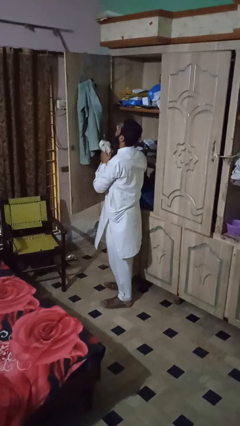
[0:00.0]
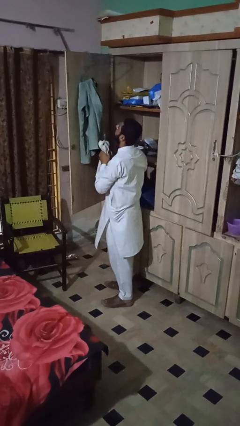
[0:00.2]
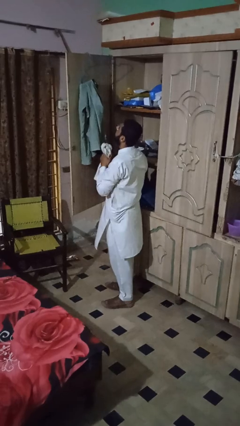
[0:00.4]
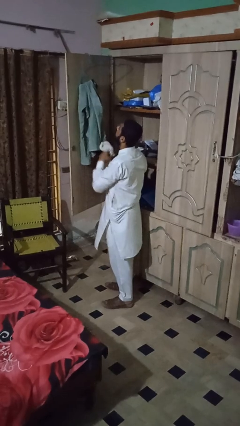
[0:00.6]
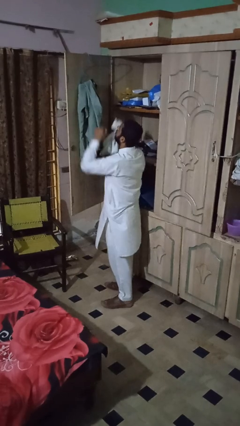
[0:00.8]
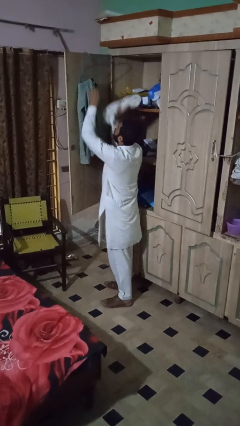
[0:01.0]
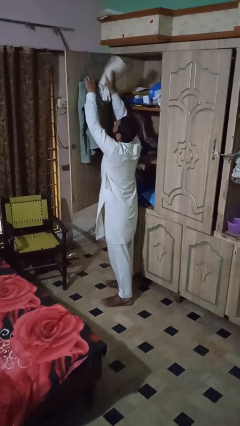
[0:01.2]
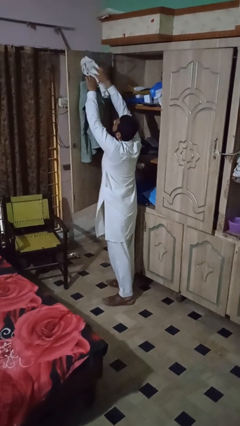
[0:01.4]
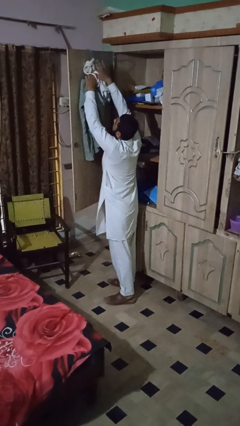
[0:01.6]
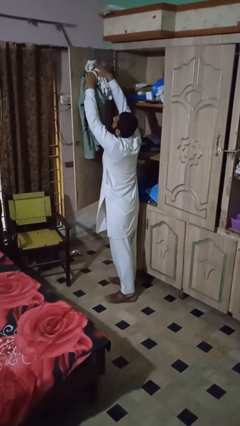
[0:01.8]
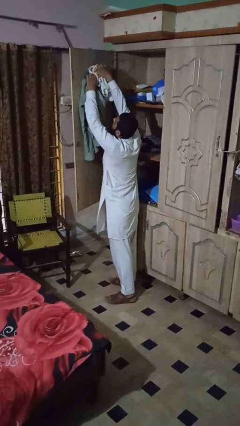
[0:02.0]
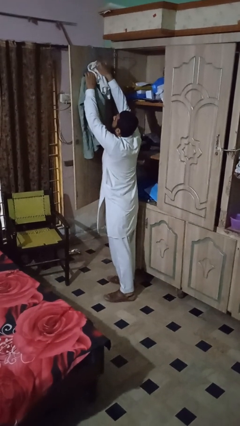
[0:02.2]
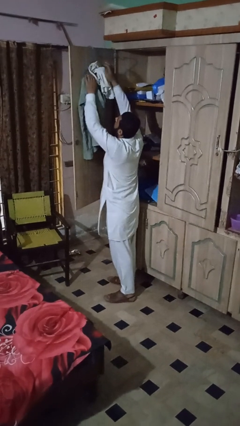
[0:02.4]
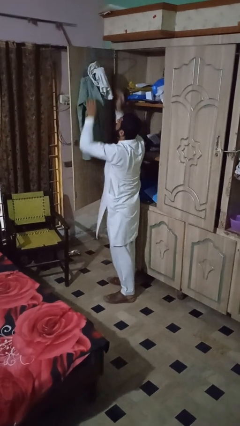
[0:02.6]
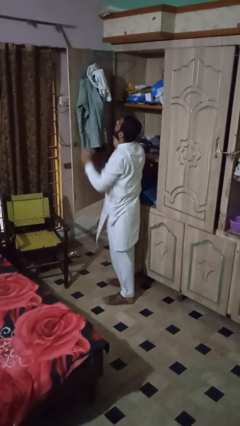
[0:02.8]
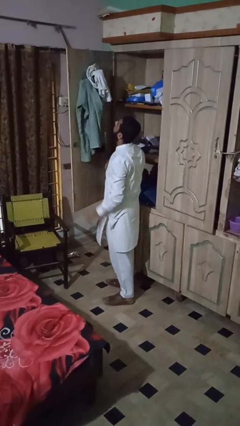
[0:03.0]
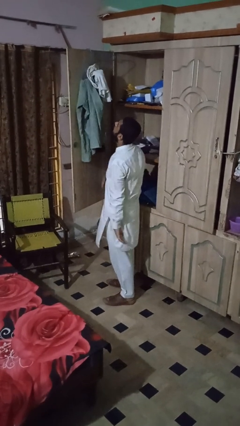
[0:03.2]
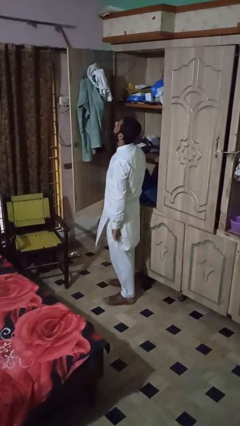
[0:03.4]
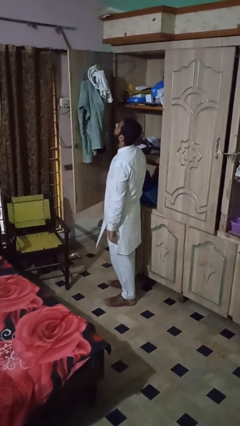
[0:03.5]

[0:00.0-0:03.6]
person puts clothes into closet

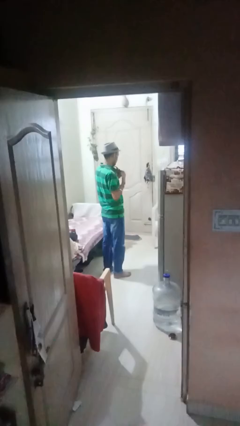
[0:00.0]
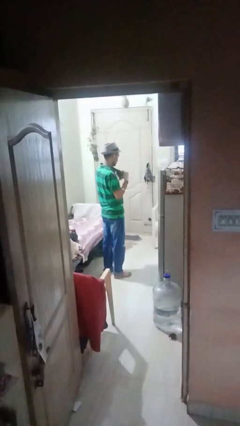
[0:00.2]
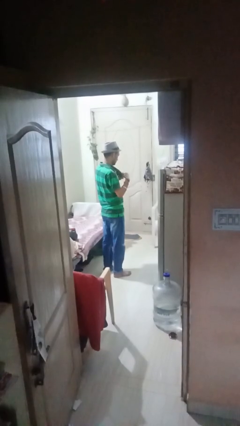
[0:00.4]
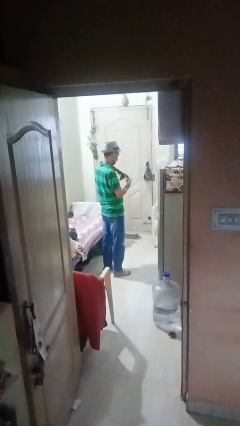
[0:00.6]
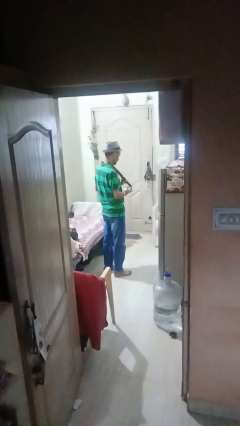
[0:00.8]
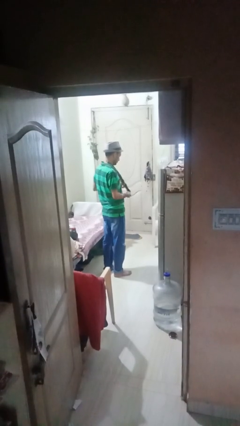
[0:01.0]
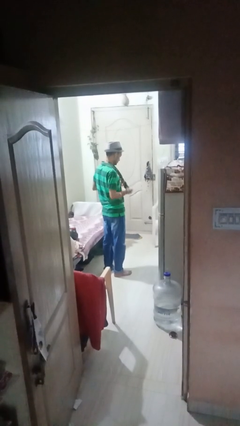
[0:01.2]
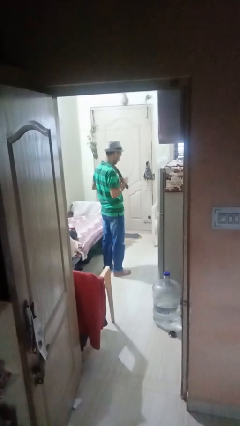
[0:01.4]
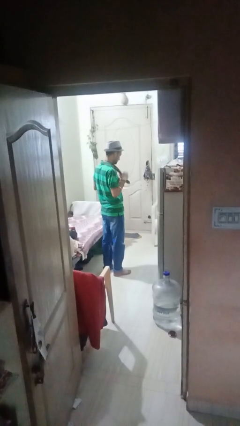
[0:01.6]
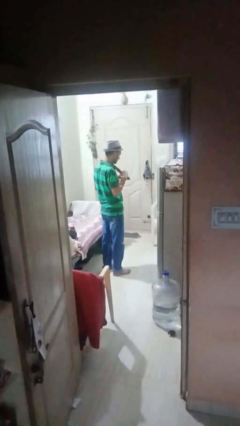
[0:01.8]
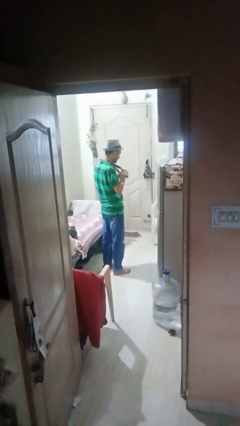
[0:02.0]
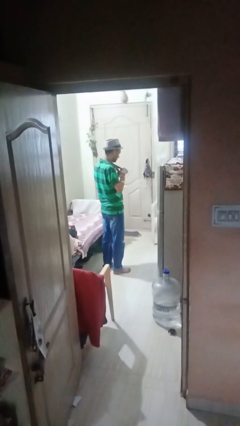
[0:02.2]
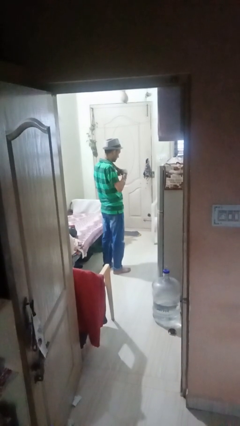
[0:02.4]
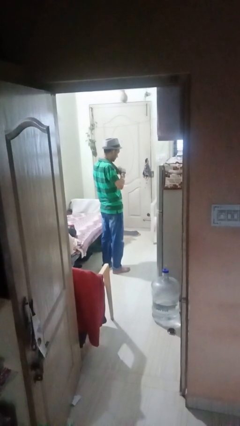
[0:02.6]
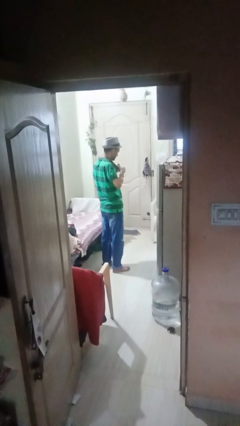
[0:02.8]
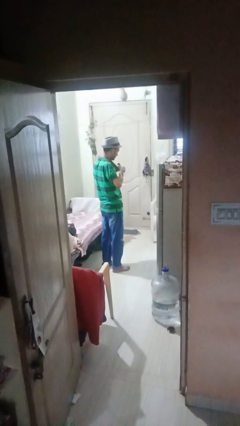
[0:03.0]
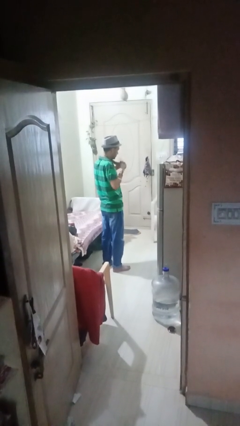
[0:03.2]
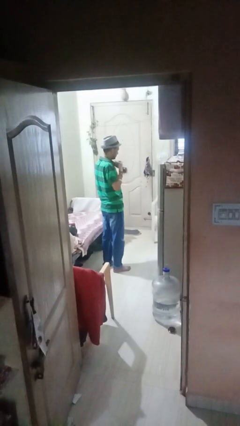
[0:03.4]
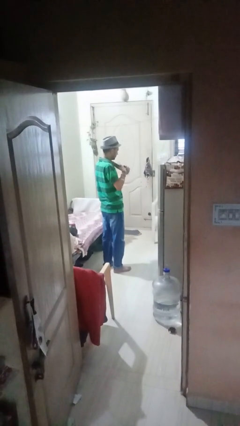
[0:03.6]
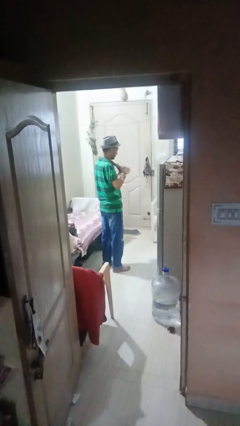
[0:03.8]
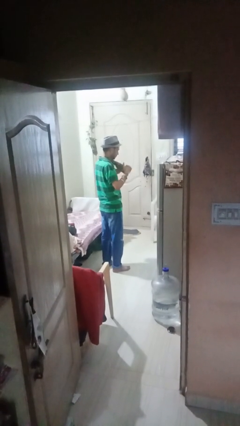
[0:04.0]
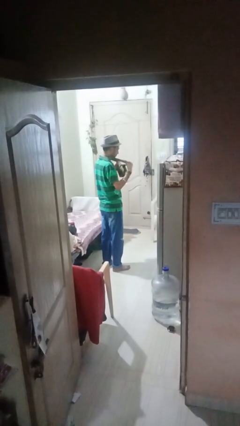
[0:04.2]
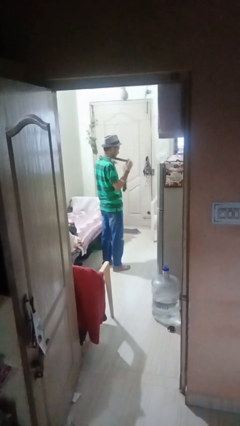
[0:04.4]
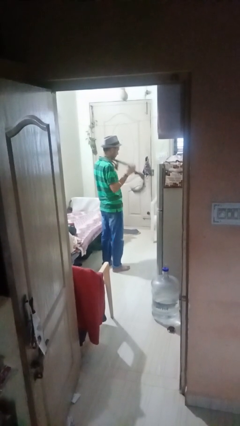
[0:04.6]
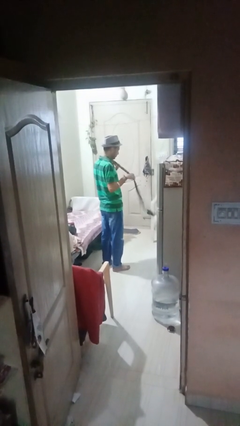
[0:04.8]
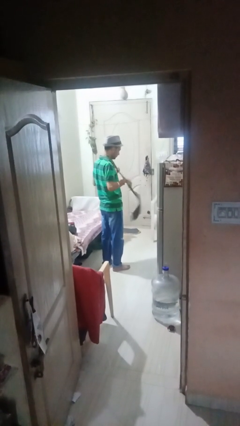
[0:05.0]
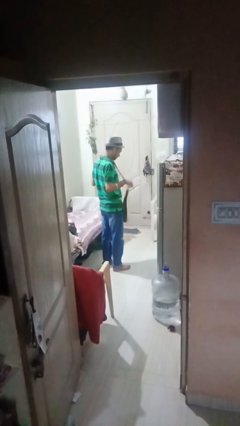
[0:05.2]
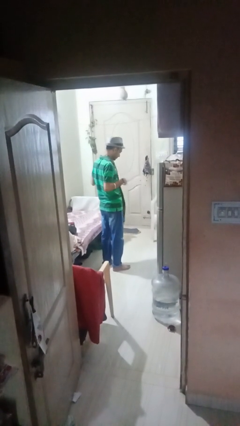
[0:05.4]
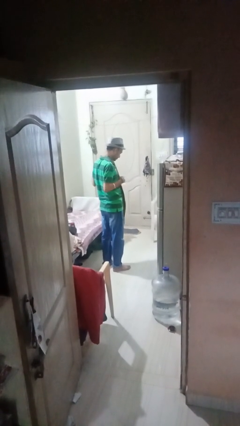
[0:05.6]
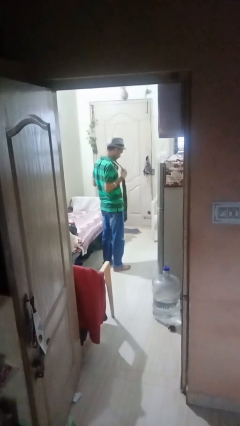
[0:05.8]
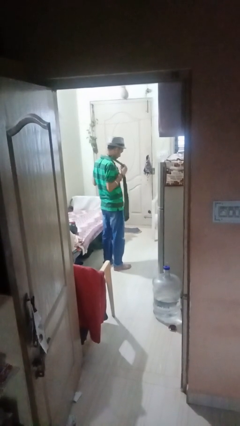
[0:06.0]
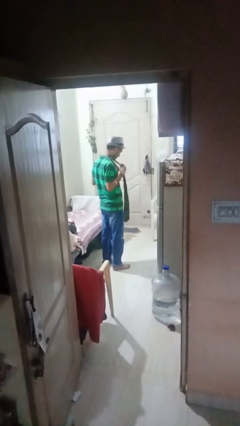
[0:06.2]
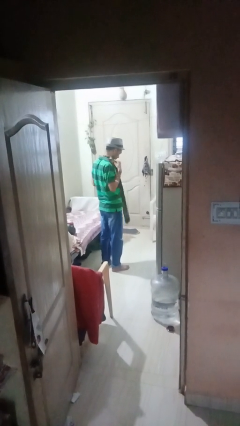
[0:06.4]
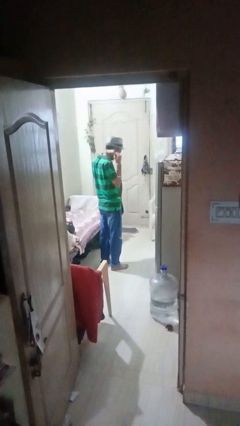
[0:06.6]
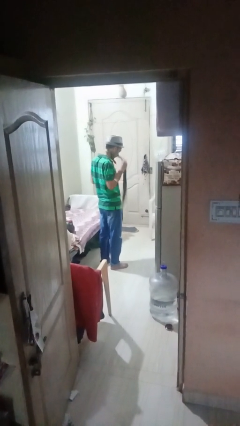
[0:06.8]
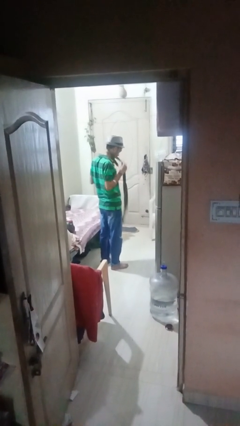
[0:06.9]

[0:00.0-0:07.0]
person takes off necktie

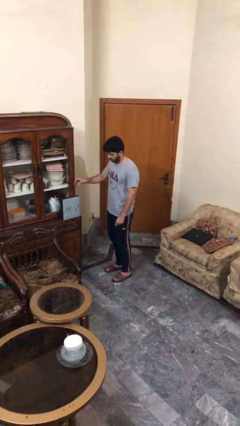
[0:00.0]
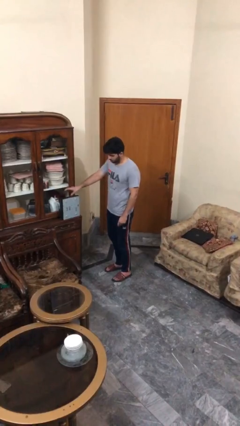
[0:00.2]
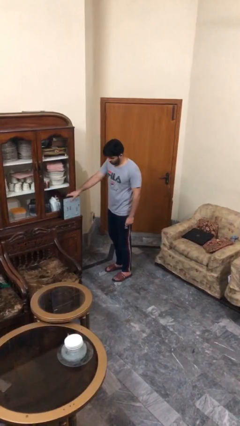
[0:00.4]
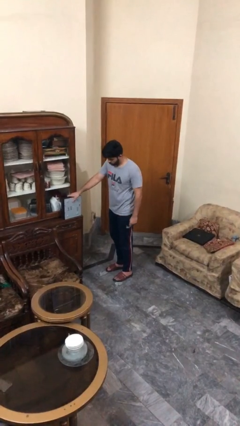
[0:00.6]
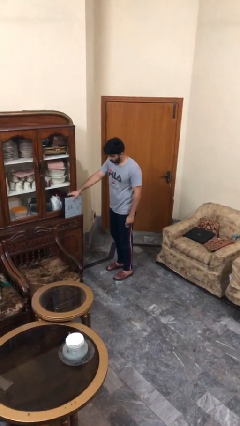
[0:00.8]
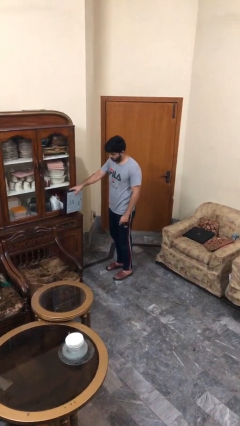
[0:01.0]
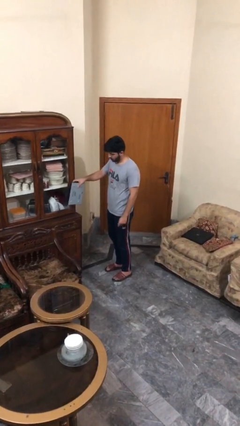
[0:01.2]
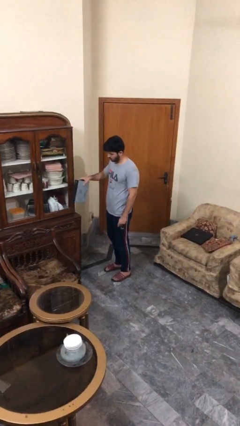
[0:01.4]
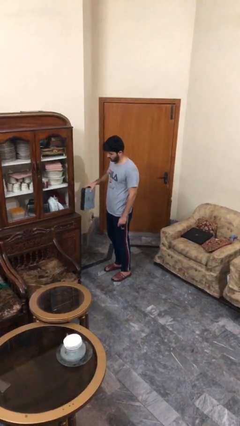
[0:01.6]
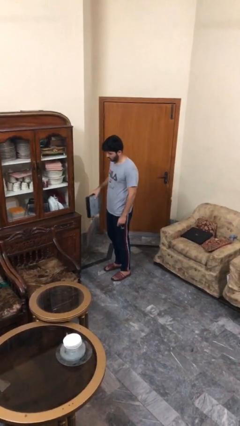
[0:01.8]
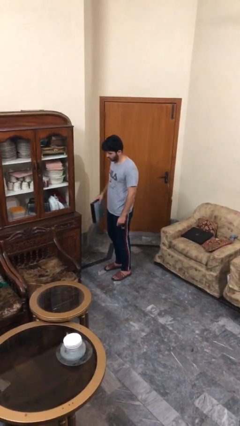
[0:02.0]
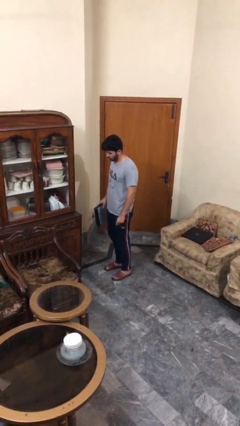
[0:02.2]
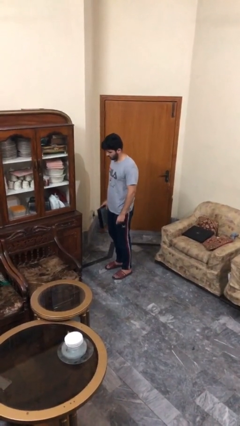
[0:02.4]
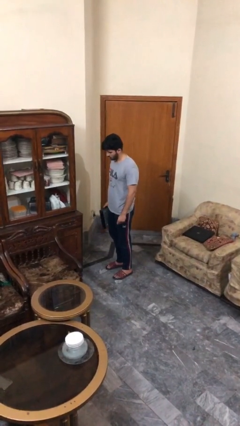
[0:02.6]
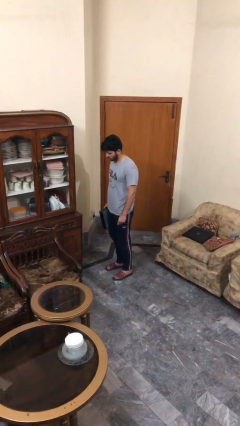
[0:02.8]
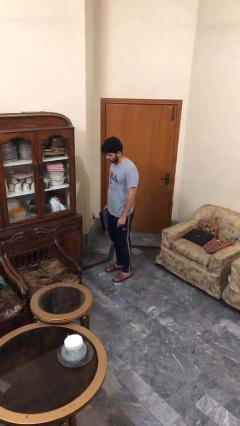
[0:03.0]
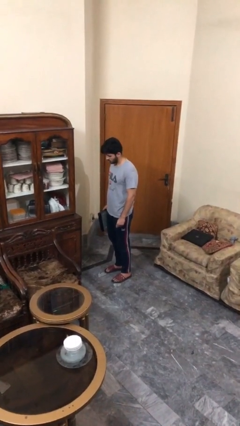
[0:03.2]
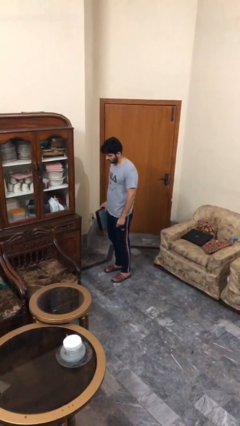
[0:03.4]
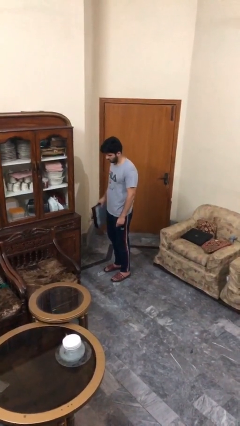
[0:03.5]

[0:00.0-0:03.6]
person picks up object from countertop

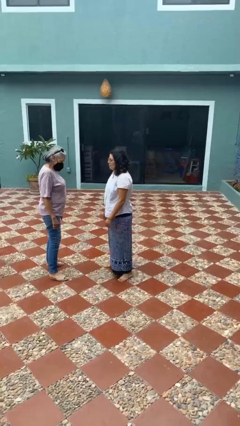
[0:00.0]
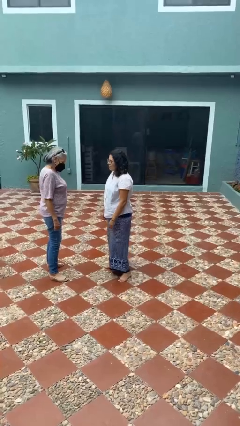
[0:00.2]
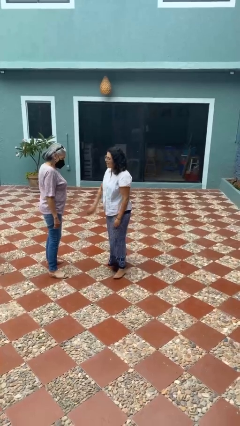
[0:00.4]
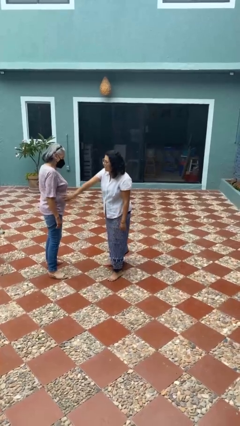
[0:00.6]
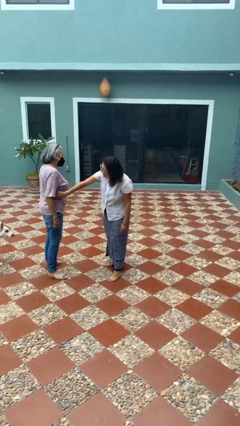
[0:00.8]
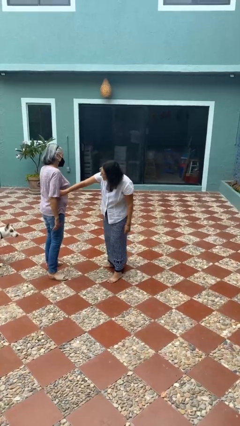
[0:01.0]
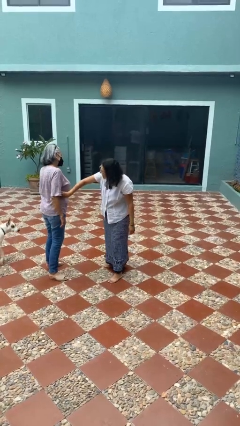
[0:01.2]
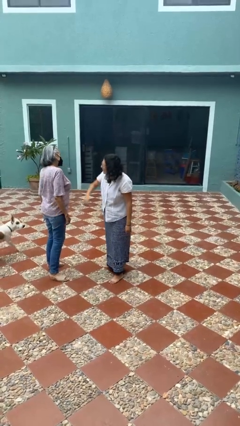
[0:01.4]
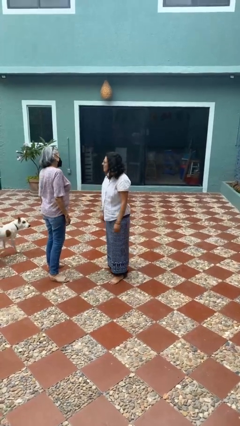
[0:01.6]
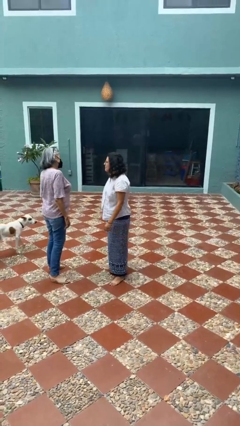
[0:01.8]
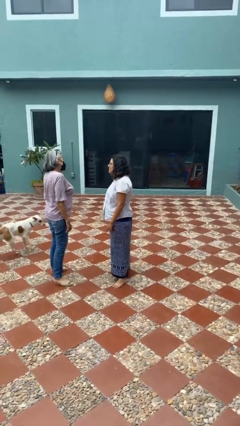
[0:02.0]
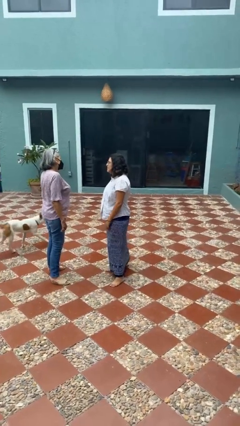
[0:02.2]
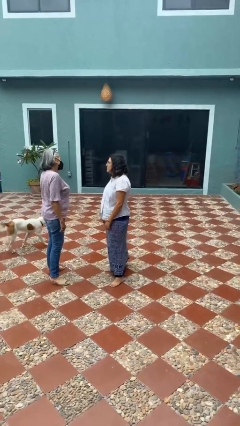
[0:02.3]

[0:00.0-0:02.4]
person tickles person

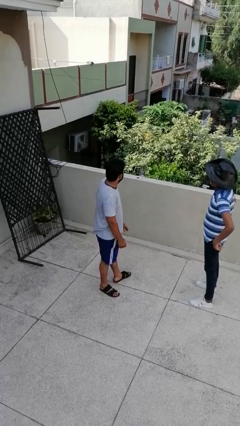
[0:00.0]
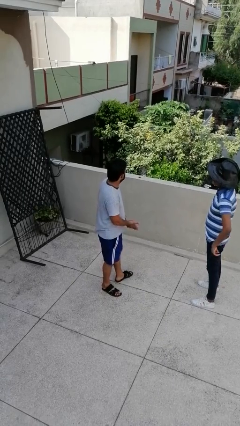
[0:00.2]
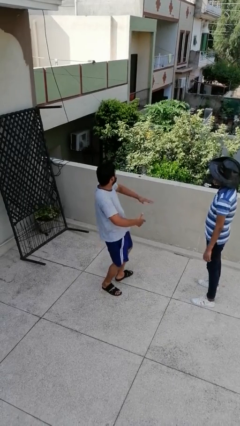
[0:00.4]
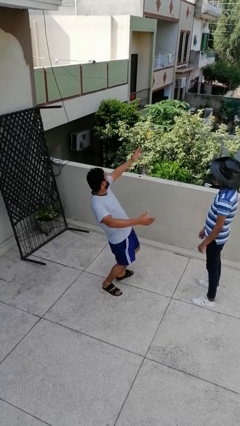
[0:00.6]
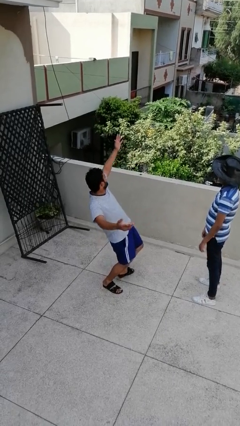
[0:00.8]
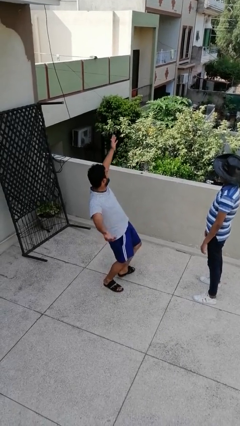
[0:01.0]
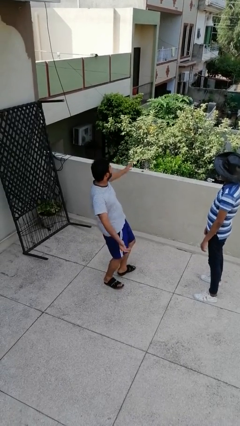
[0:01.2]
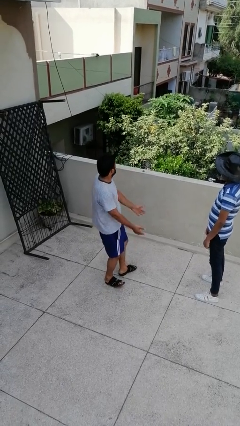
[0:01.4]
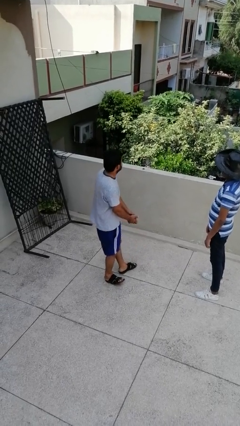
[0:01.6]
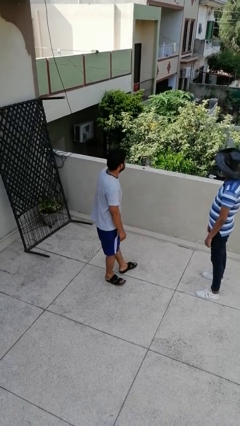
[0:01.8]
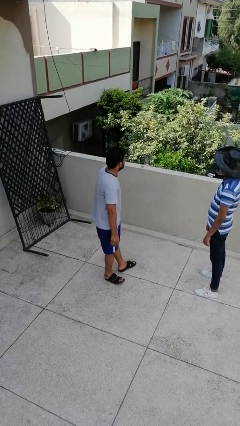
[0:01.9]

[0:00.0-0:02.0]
person laughs with person
